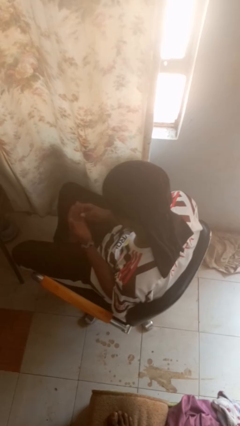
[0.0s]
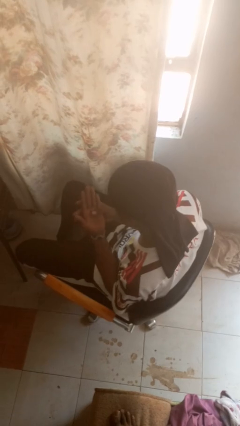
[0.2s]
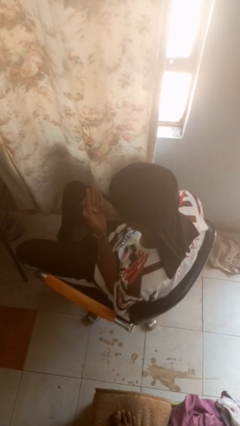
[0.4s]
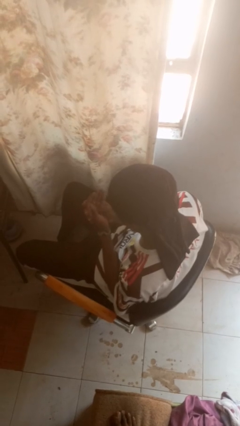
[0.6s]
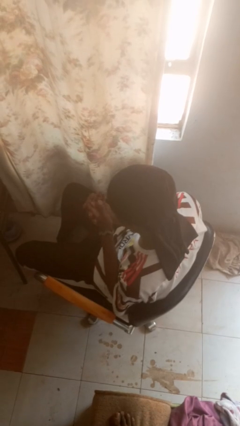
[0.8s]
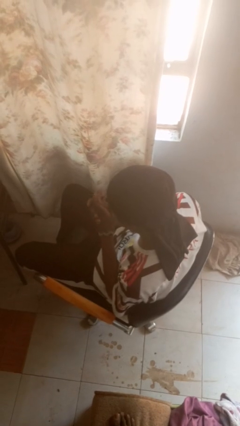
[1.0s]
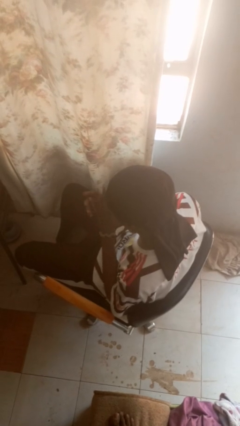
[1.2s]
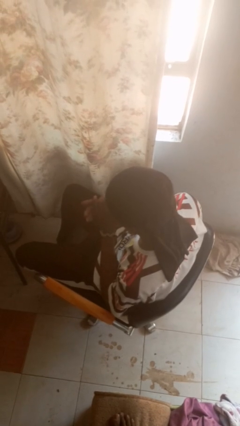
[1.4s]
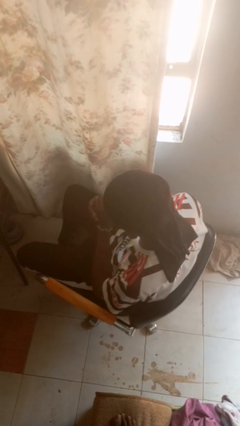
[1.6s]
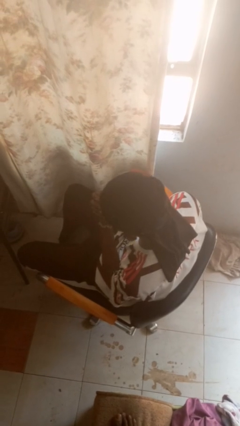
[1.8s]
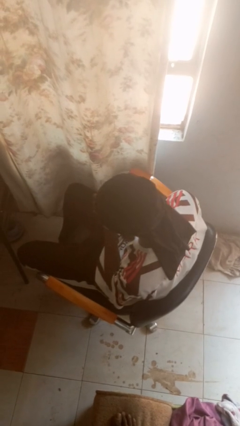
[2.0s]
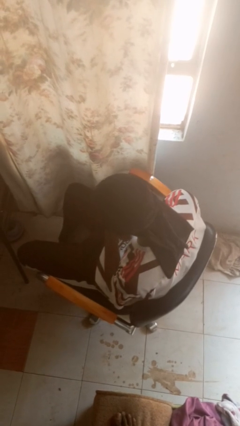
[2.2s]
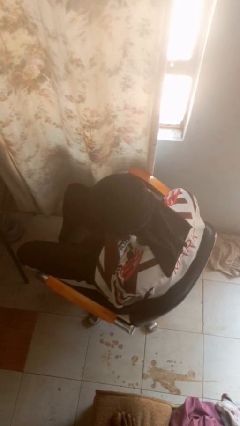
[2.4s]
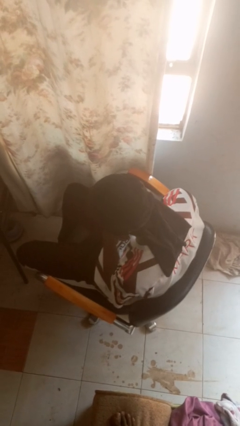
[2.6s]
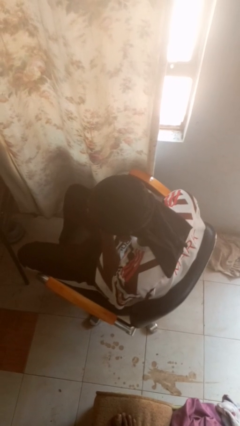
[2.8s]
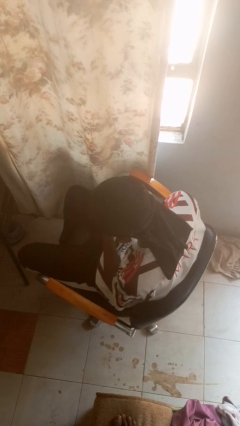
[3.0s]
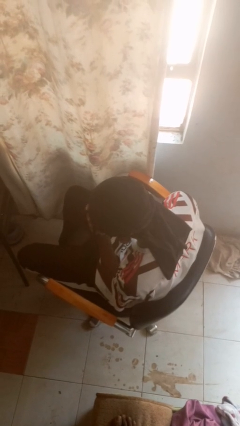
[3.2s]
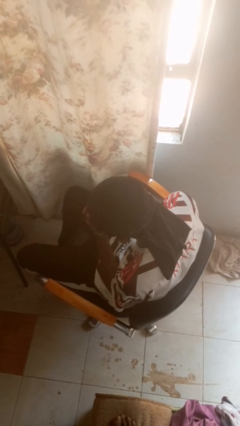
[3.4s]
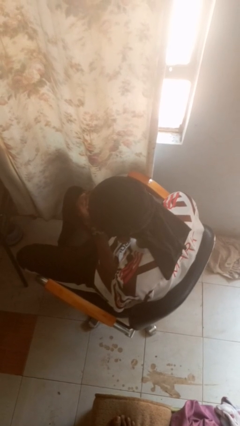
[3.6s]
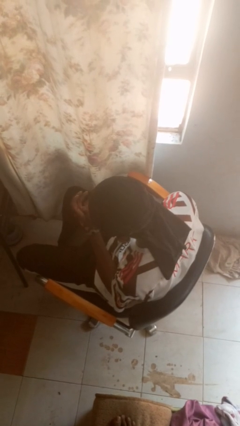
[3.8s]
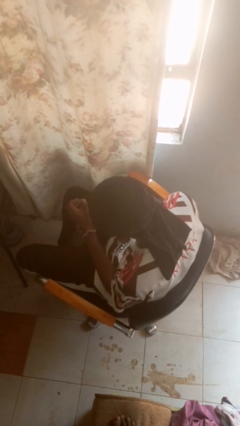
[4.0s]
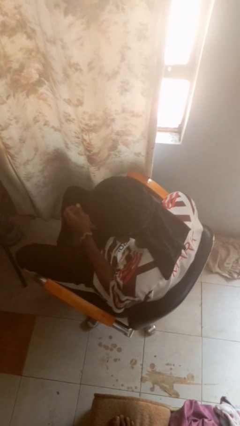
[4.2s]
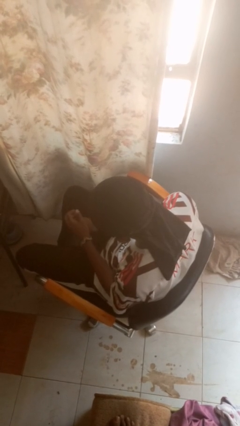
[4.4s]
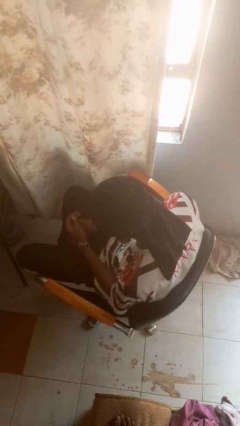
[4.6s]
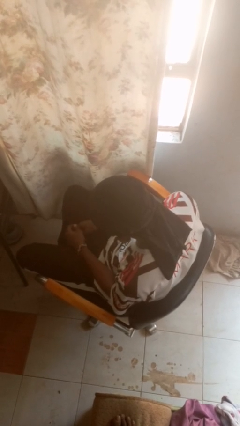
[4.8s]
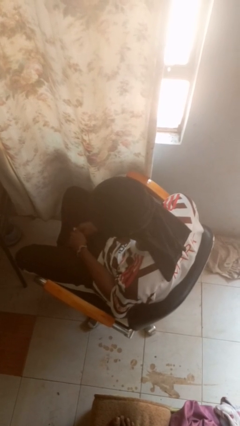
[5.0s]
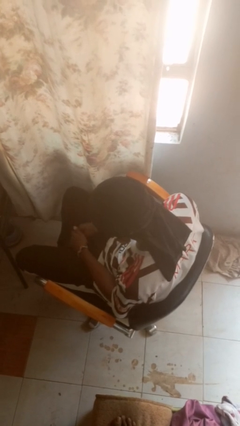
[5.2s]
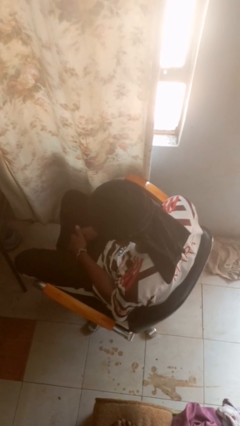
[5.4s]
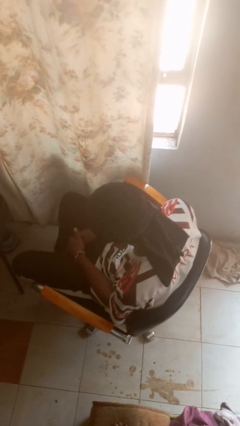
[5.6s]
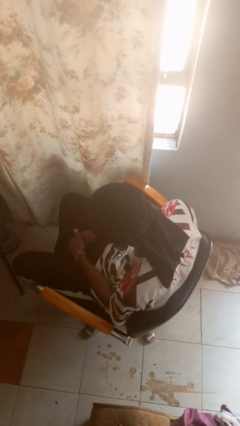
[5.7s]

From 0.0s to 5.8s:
person looks at hands in lap

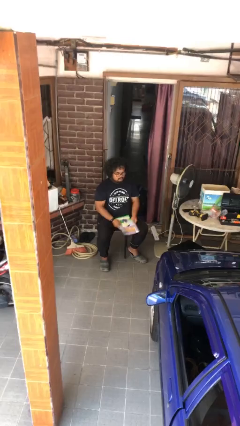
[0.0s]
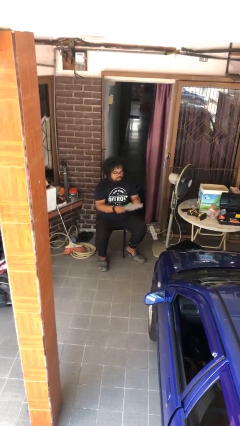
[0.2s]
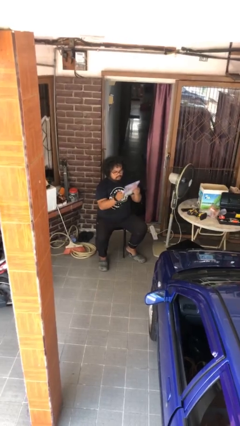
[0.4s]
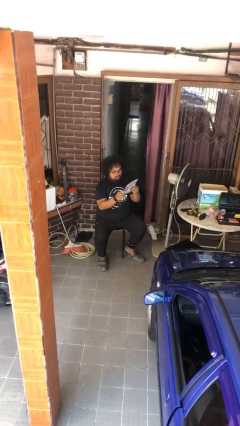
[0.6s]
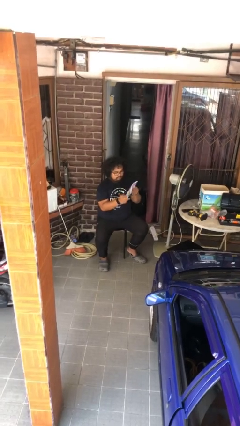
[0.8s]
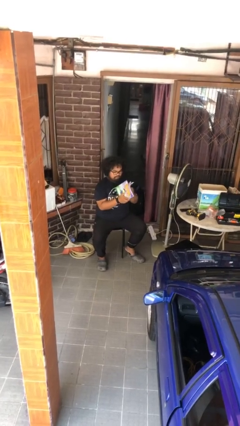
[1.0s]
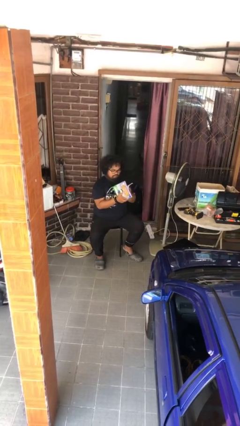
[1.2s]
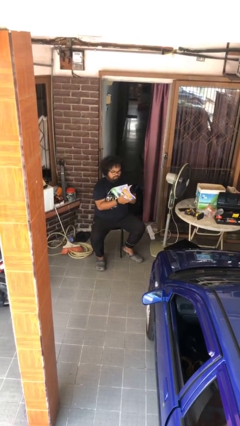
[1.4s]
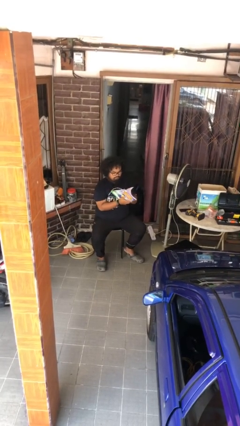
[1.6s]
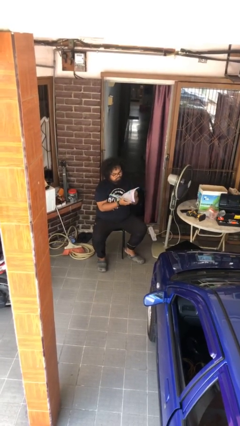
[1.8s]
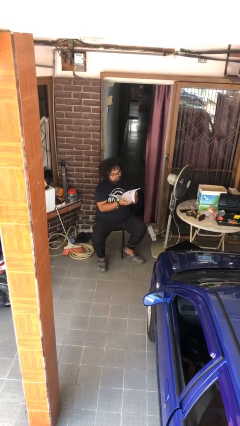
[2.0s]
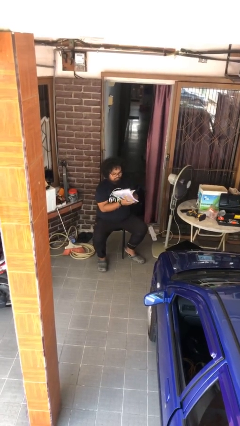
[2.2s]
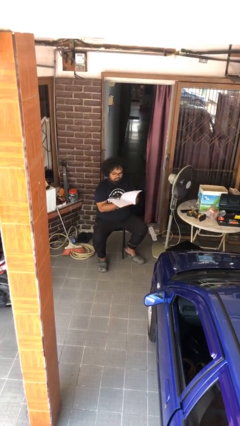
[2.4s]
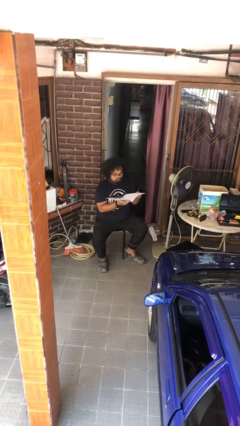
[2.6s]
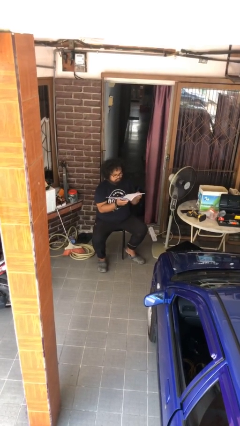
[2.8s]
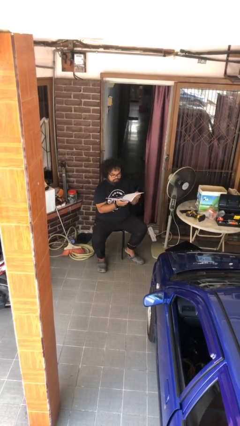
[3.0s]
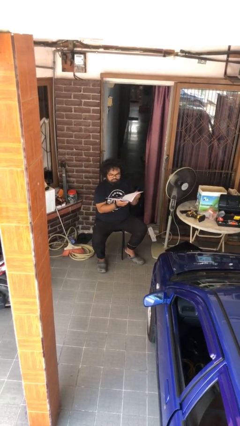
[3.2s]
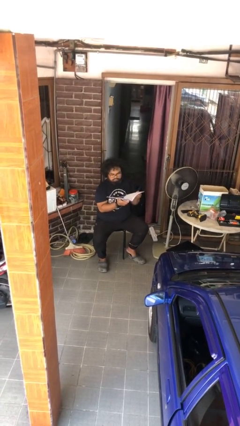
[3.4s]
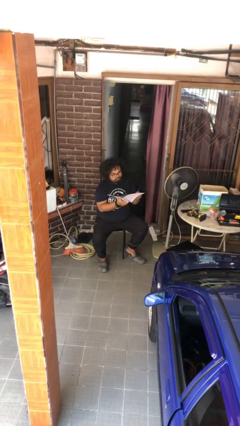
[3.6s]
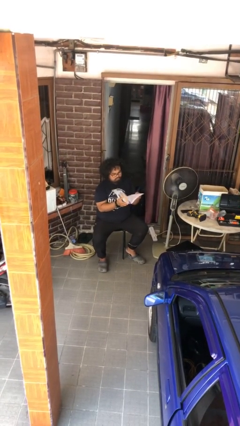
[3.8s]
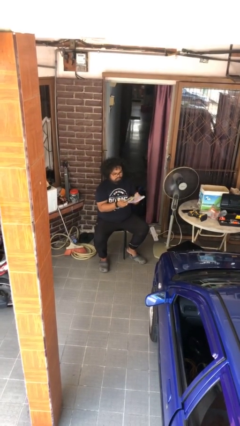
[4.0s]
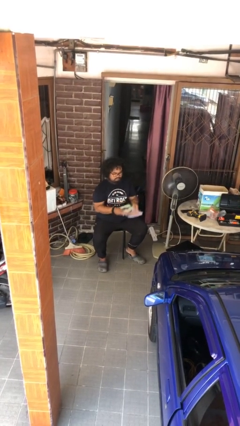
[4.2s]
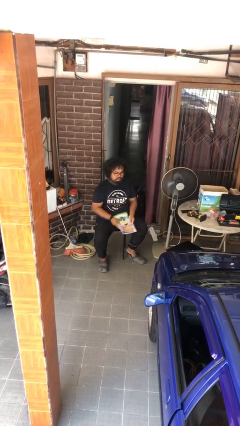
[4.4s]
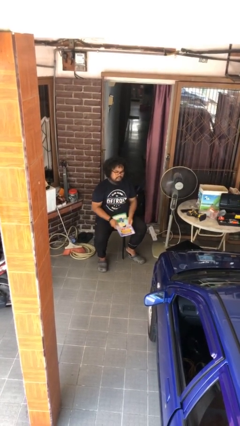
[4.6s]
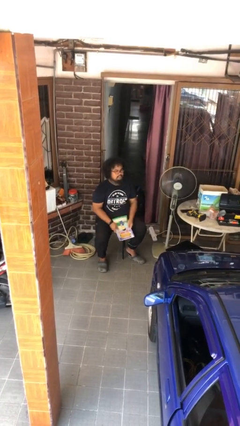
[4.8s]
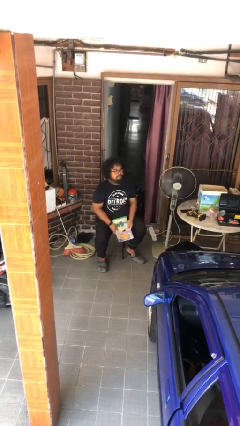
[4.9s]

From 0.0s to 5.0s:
person reads document

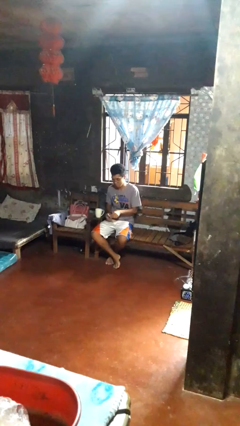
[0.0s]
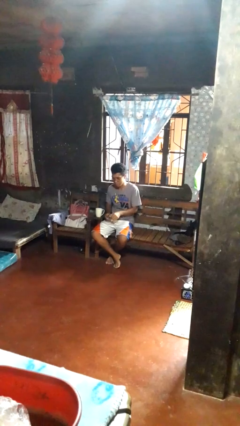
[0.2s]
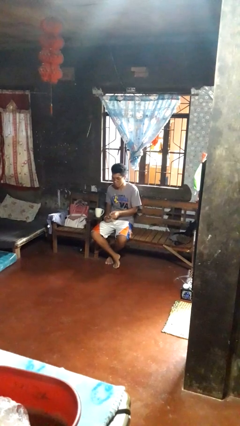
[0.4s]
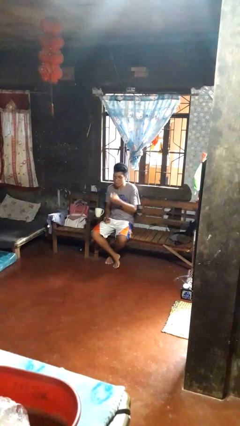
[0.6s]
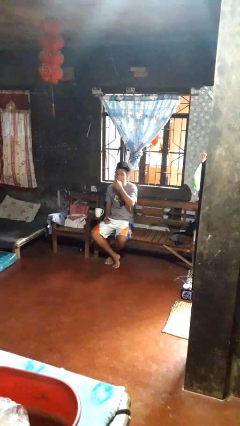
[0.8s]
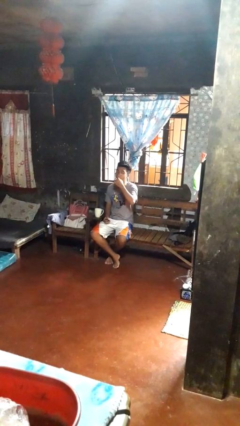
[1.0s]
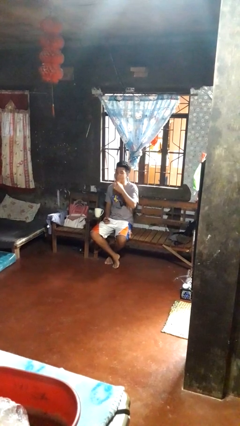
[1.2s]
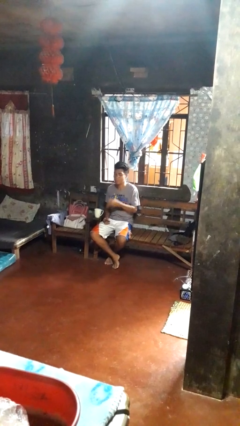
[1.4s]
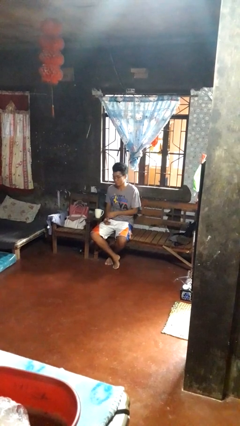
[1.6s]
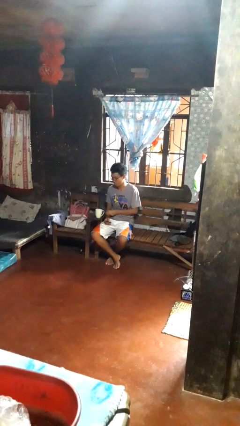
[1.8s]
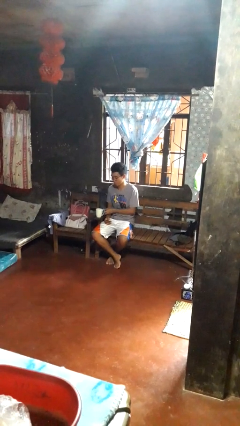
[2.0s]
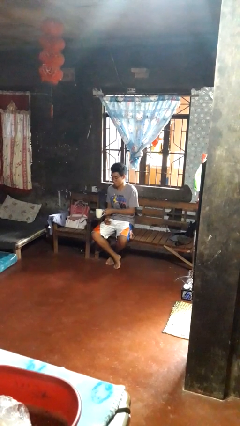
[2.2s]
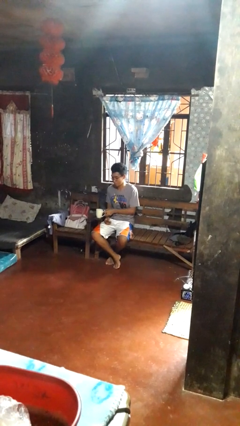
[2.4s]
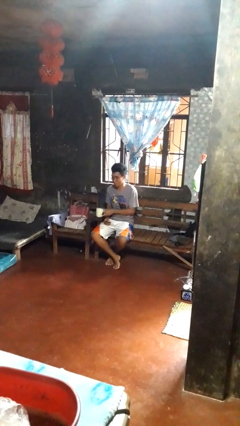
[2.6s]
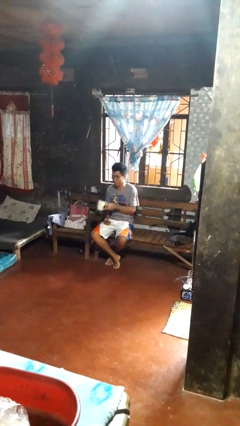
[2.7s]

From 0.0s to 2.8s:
person takes medicine pills

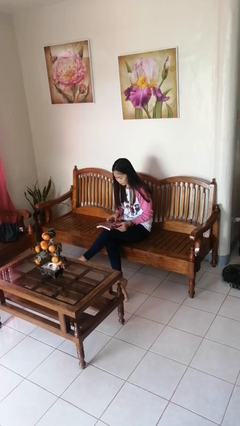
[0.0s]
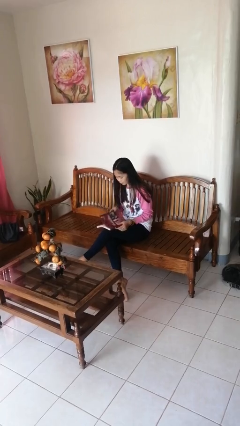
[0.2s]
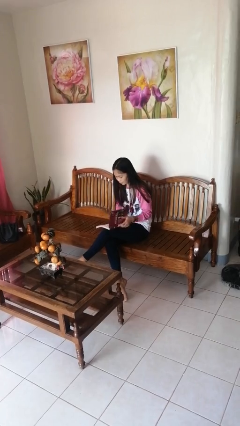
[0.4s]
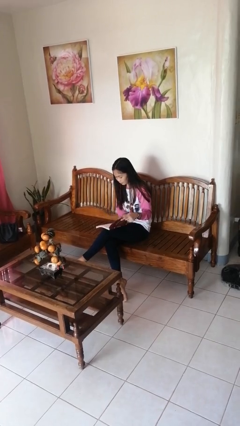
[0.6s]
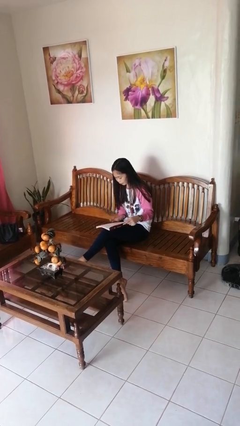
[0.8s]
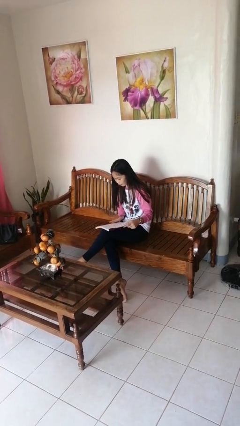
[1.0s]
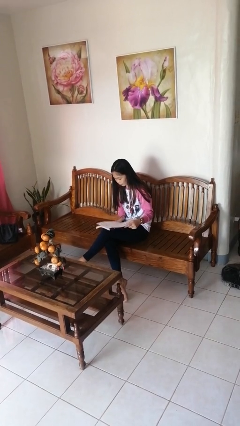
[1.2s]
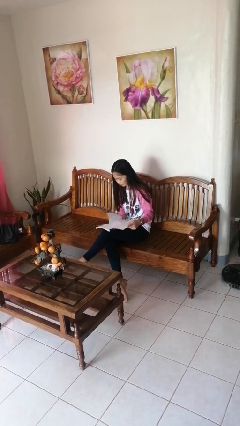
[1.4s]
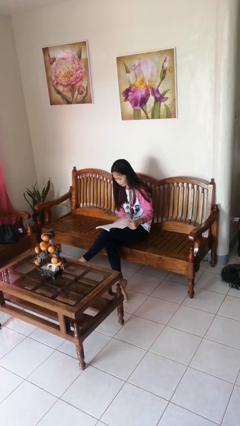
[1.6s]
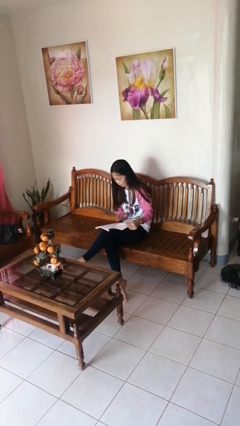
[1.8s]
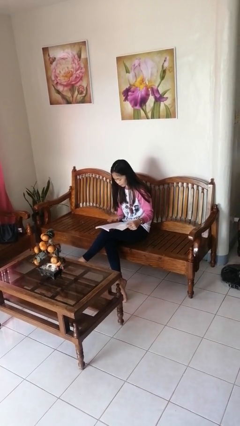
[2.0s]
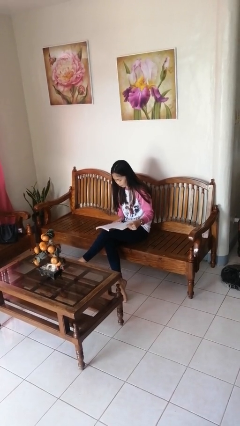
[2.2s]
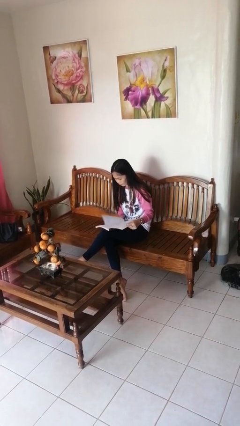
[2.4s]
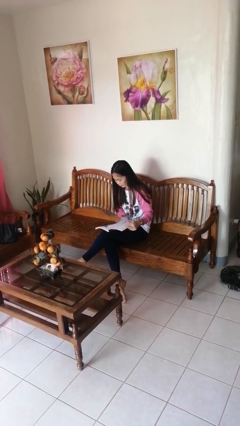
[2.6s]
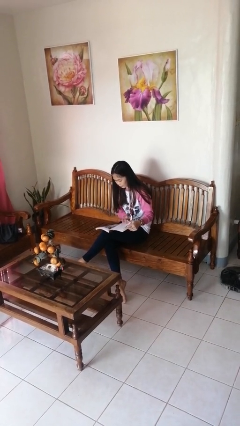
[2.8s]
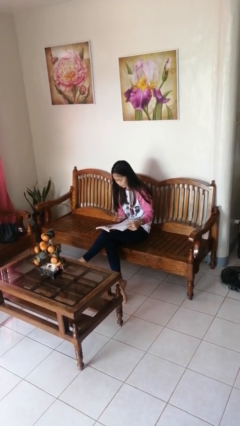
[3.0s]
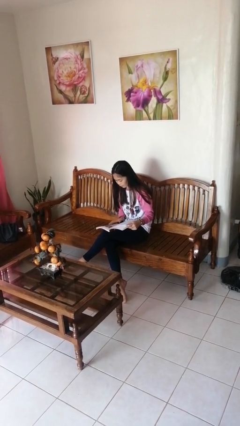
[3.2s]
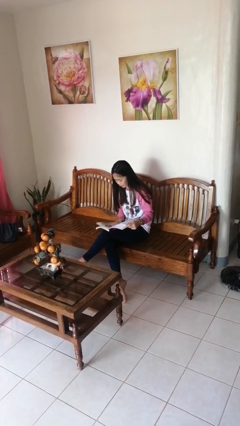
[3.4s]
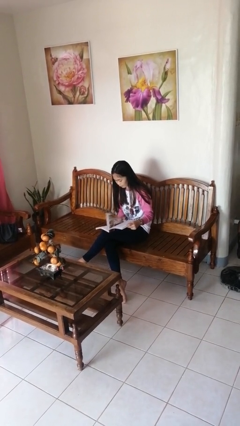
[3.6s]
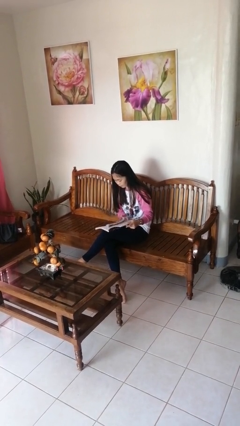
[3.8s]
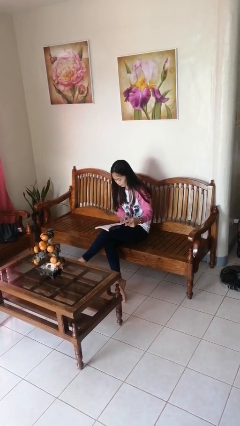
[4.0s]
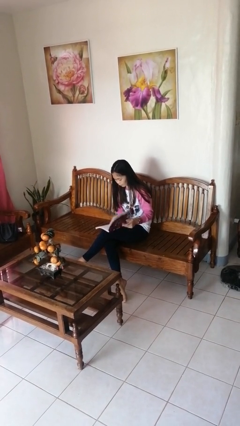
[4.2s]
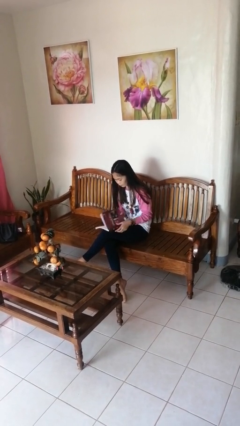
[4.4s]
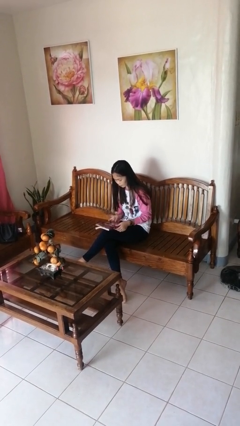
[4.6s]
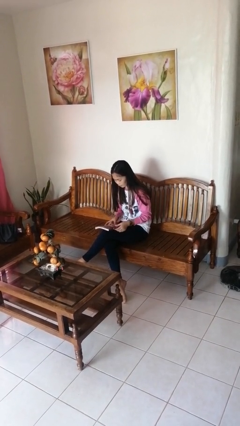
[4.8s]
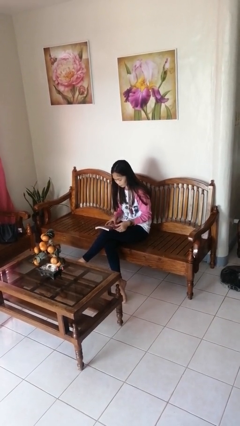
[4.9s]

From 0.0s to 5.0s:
person reads book
